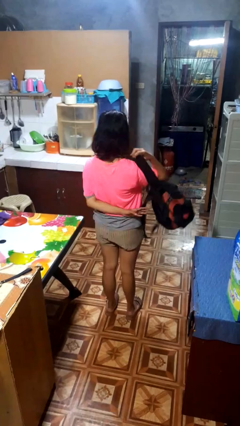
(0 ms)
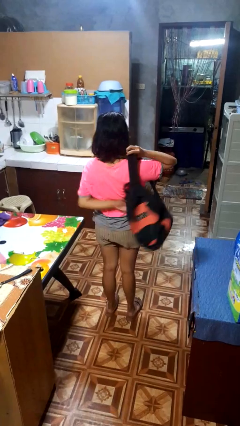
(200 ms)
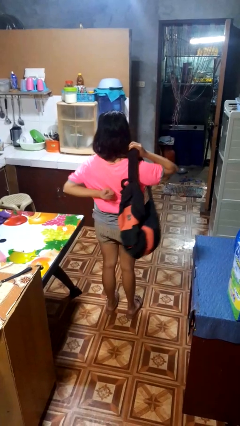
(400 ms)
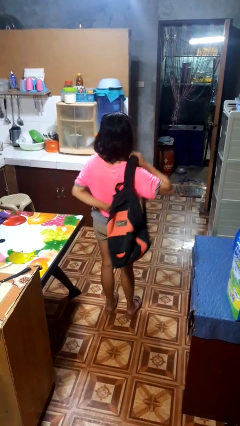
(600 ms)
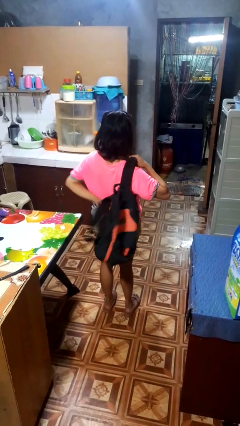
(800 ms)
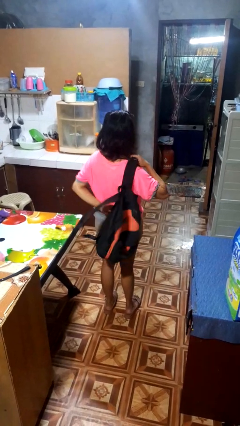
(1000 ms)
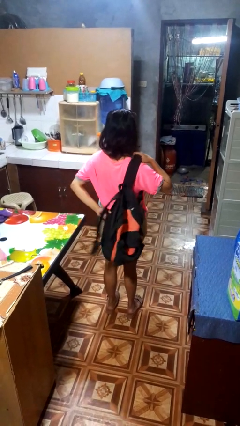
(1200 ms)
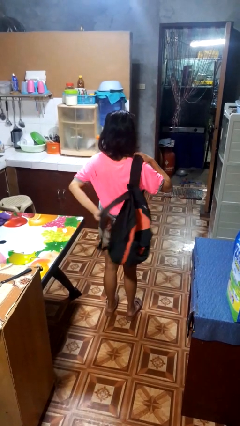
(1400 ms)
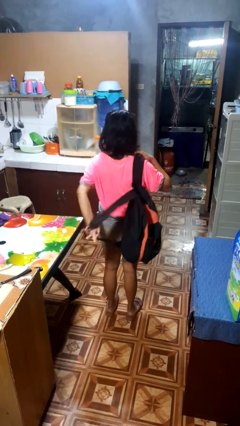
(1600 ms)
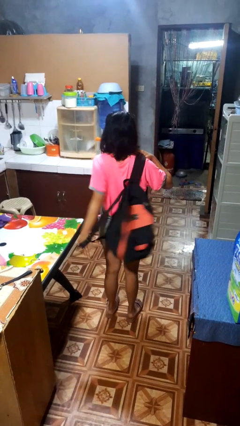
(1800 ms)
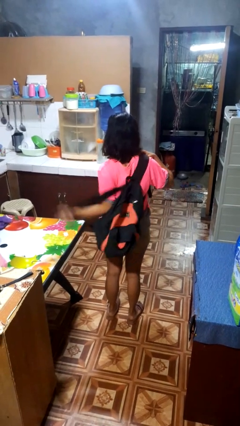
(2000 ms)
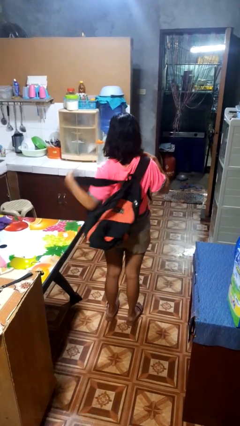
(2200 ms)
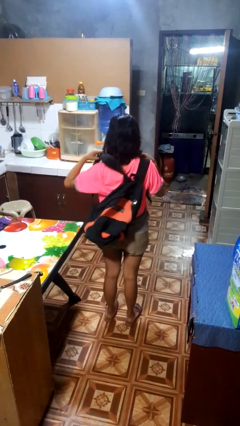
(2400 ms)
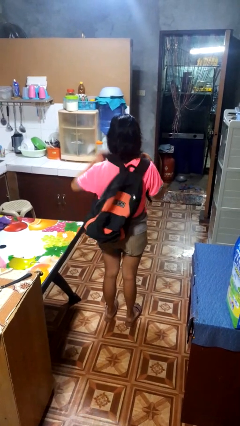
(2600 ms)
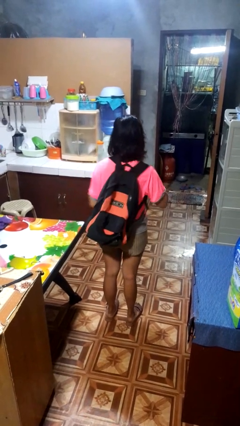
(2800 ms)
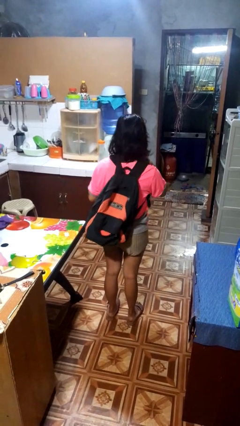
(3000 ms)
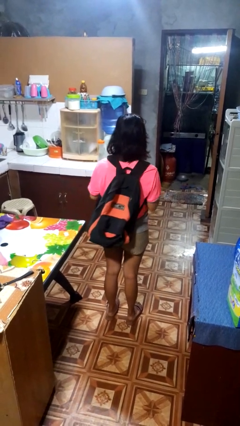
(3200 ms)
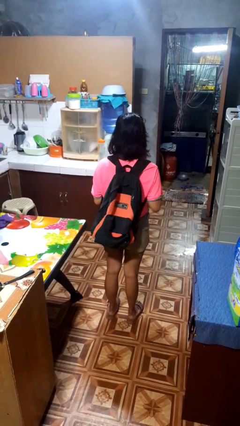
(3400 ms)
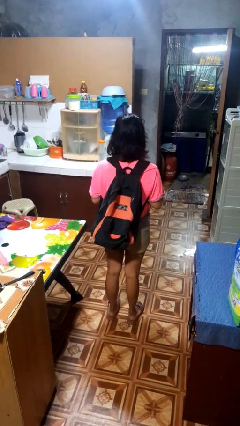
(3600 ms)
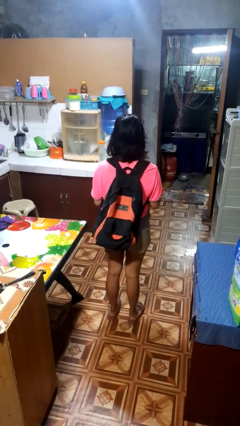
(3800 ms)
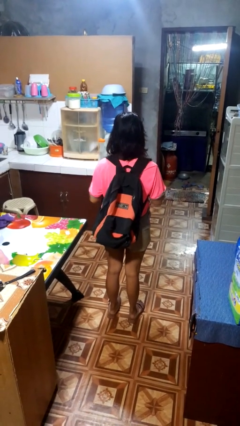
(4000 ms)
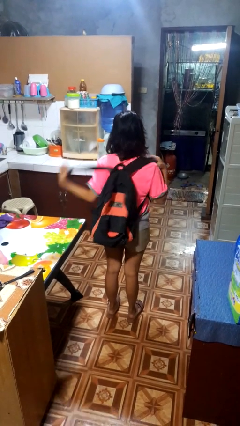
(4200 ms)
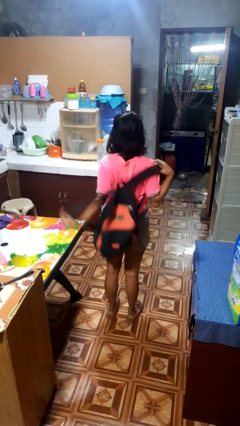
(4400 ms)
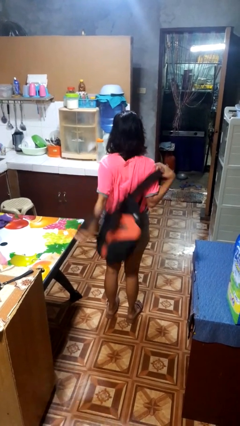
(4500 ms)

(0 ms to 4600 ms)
person puts on backpack

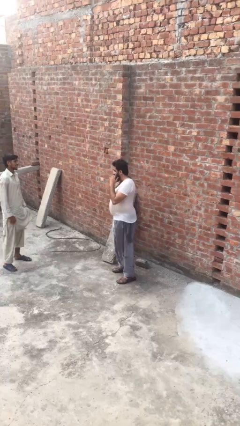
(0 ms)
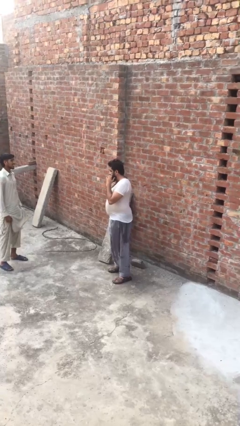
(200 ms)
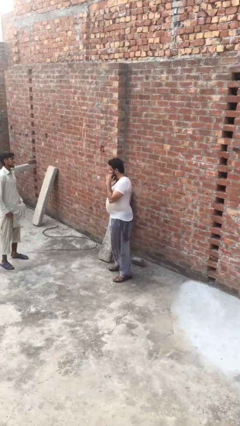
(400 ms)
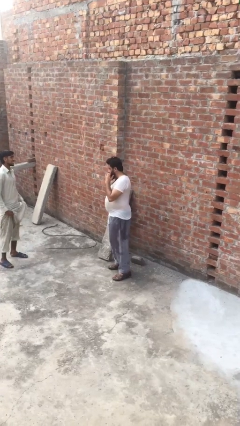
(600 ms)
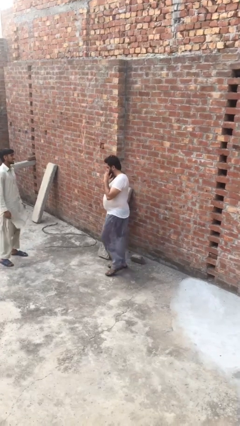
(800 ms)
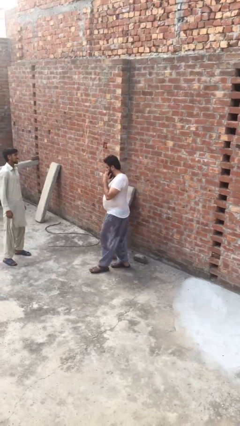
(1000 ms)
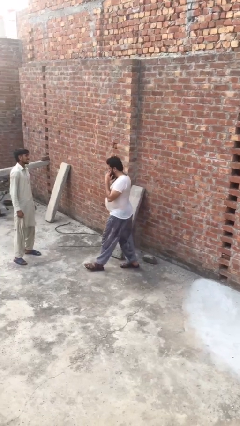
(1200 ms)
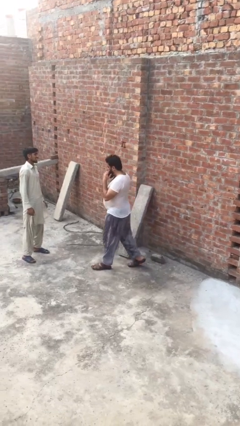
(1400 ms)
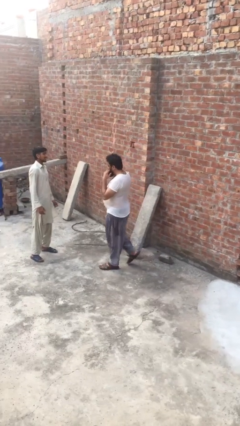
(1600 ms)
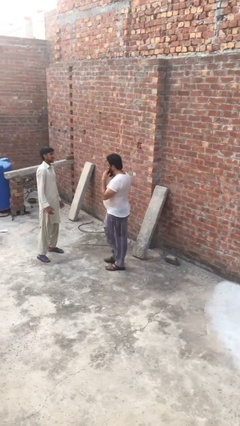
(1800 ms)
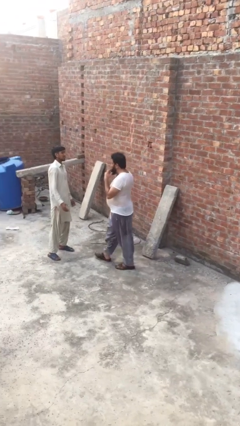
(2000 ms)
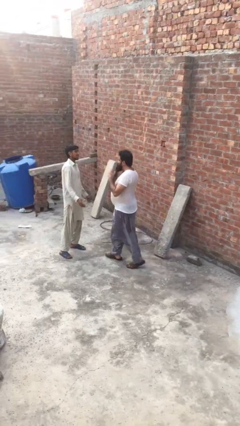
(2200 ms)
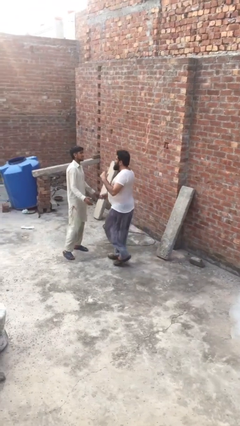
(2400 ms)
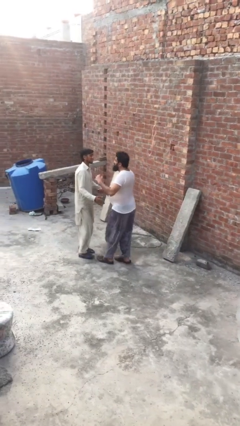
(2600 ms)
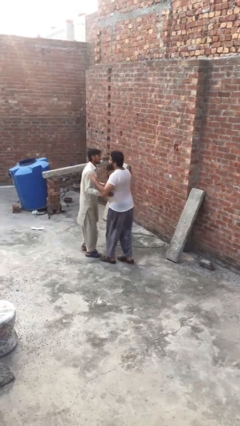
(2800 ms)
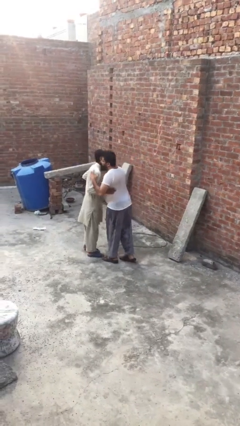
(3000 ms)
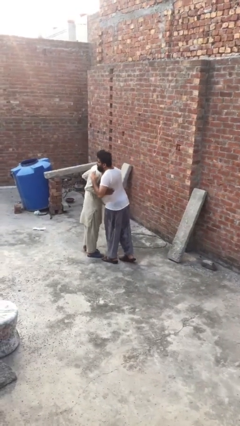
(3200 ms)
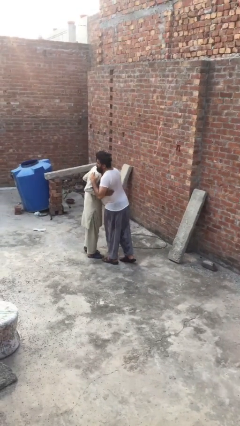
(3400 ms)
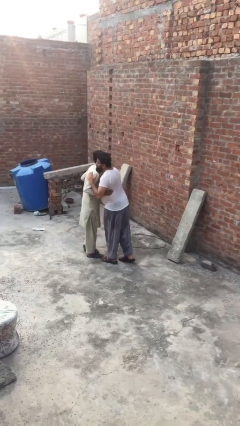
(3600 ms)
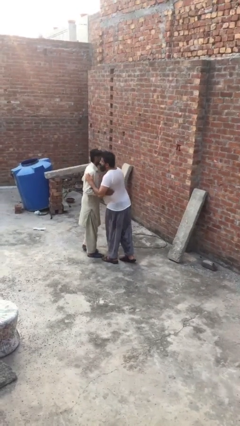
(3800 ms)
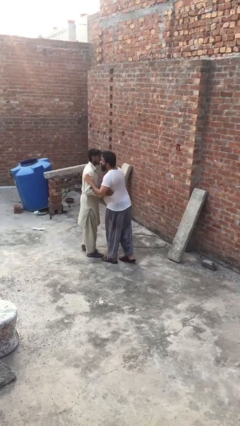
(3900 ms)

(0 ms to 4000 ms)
person embraces person

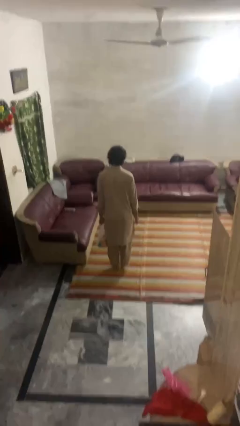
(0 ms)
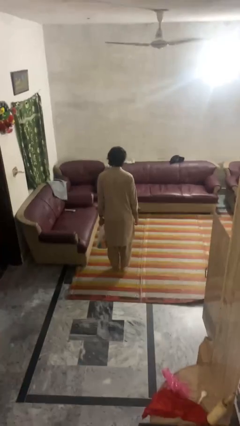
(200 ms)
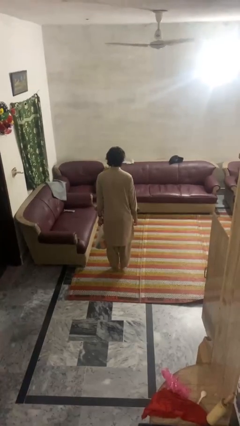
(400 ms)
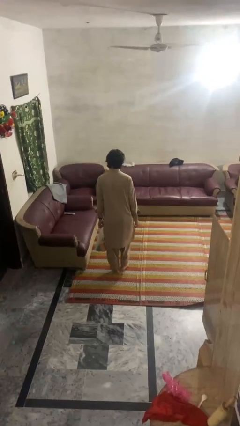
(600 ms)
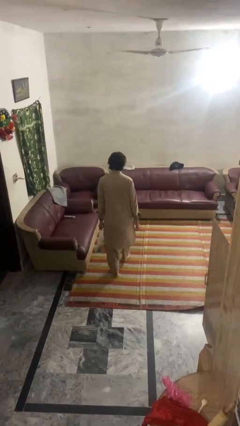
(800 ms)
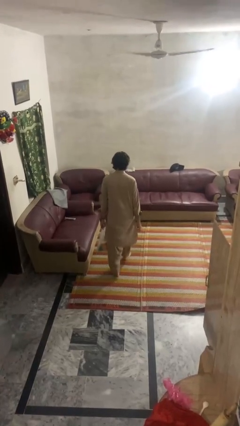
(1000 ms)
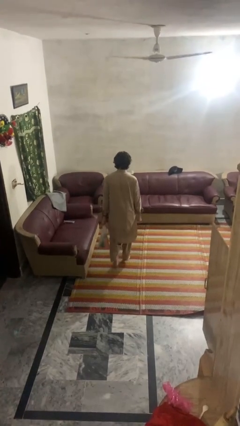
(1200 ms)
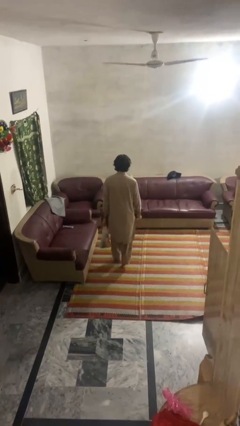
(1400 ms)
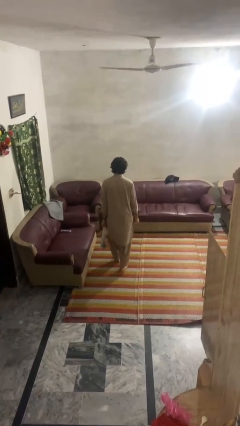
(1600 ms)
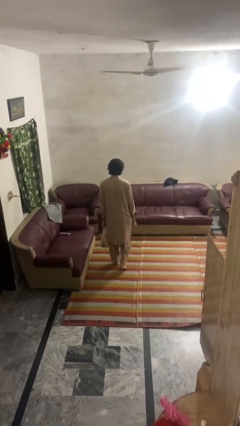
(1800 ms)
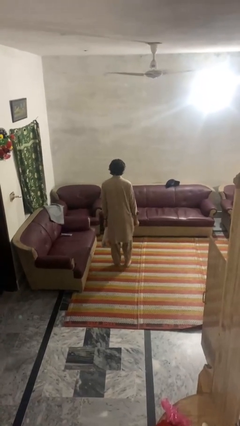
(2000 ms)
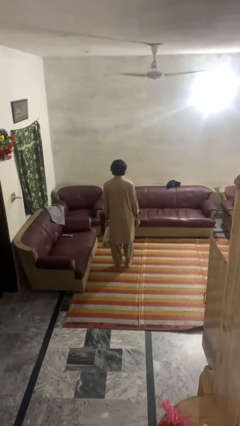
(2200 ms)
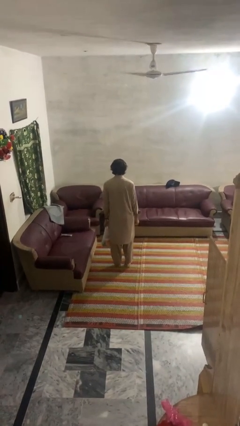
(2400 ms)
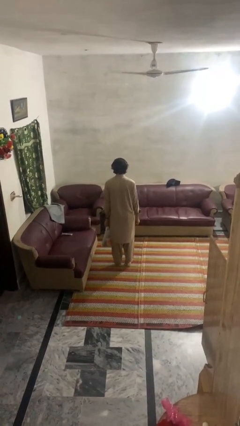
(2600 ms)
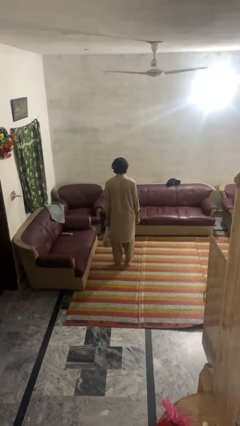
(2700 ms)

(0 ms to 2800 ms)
person carries groceries

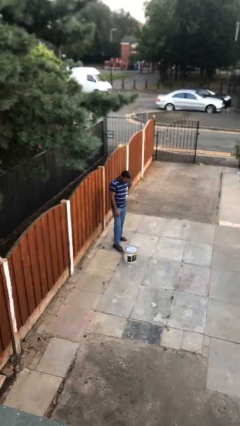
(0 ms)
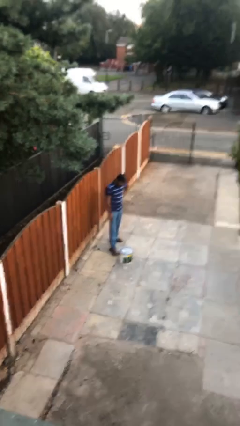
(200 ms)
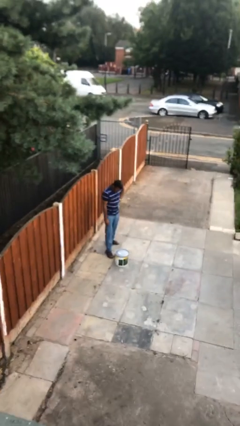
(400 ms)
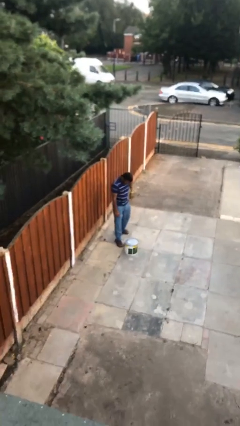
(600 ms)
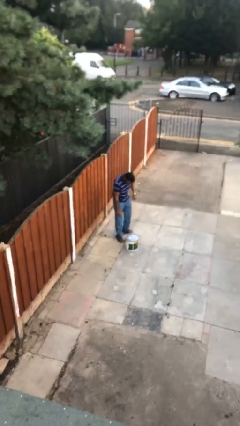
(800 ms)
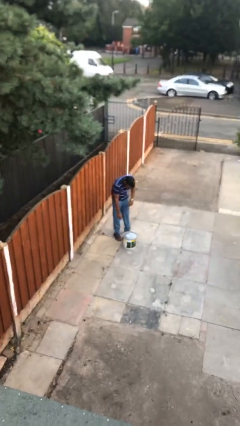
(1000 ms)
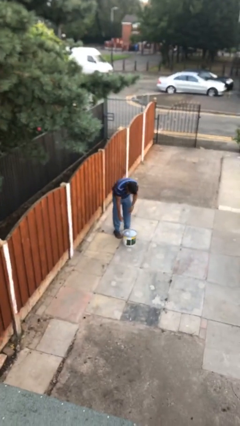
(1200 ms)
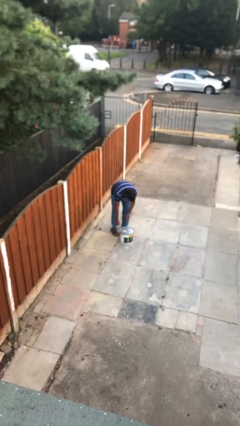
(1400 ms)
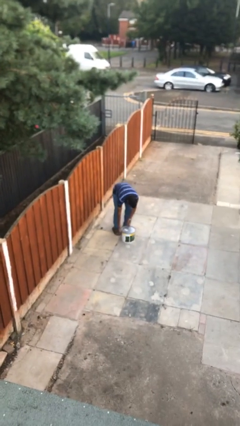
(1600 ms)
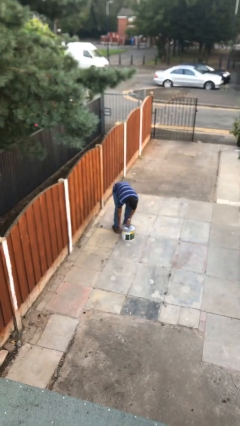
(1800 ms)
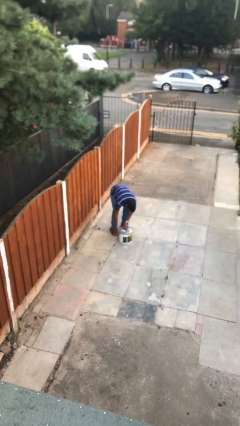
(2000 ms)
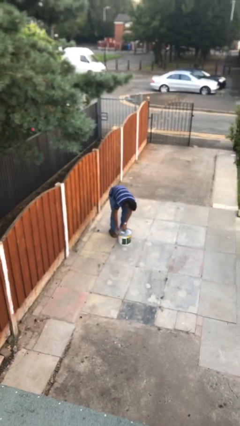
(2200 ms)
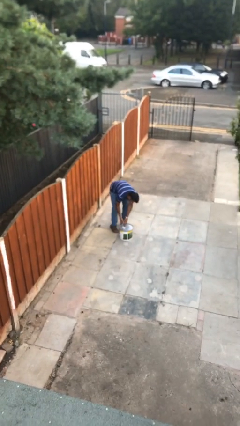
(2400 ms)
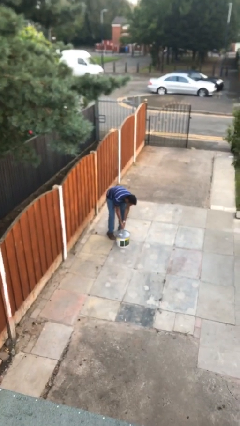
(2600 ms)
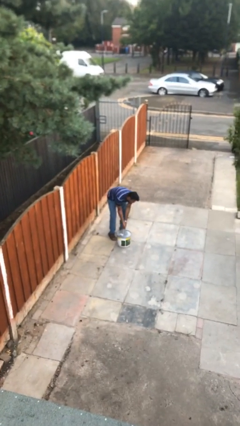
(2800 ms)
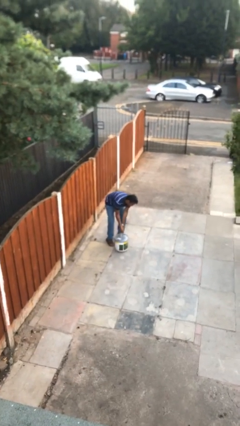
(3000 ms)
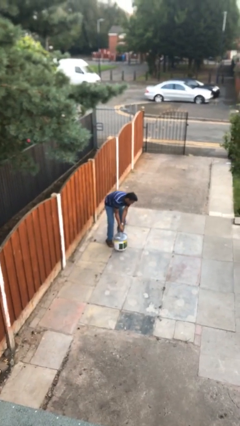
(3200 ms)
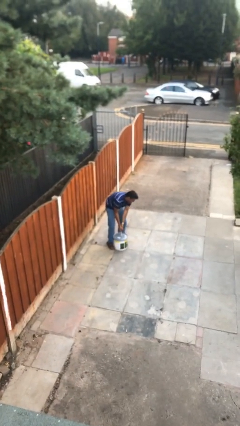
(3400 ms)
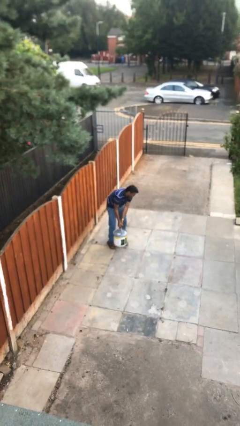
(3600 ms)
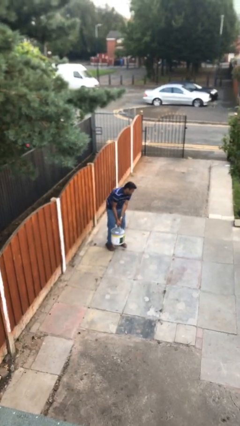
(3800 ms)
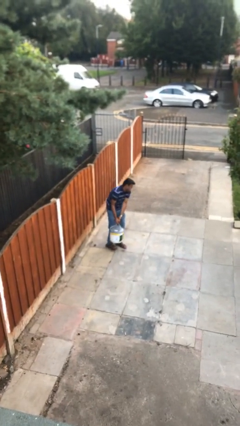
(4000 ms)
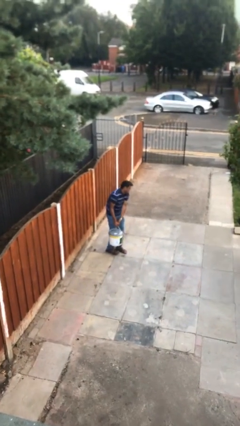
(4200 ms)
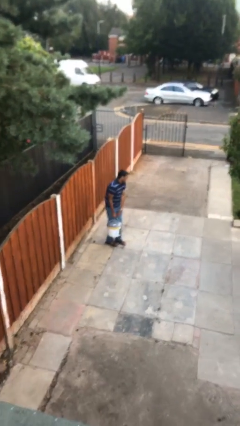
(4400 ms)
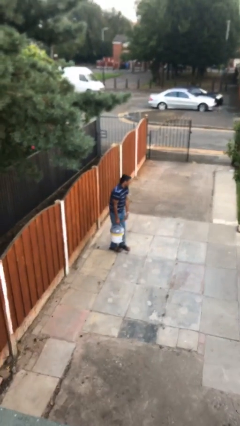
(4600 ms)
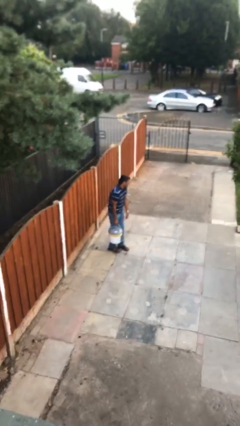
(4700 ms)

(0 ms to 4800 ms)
person picks up object from floor

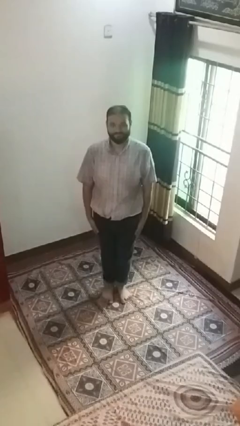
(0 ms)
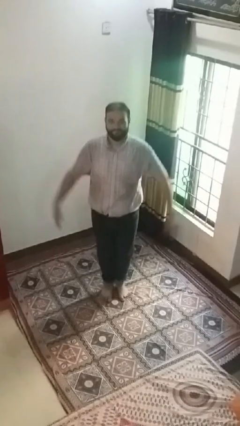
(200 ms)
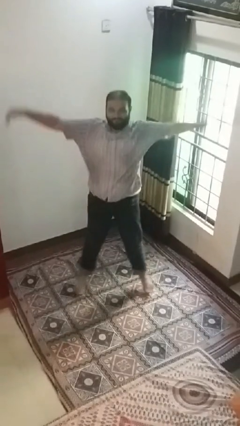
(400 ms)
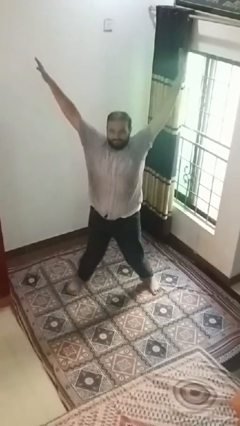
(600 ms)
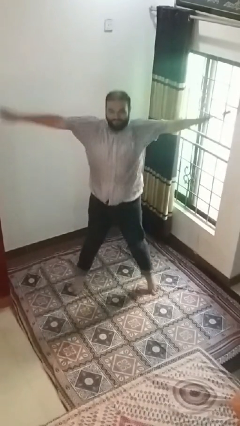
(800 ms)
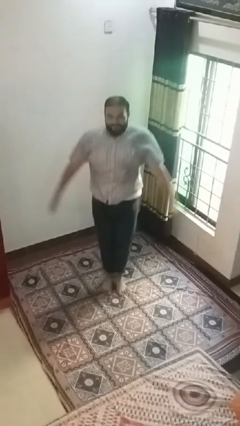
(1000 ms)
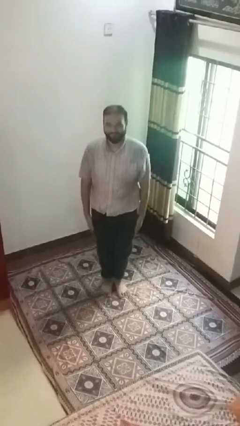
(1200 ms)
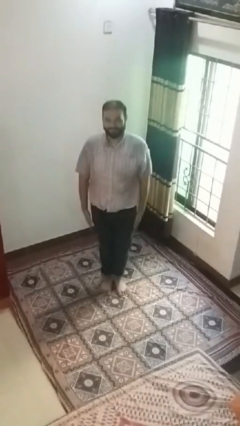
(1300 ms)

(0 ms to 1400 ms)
person exercises with jumping jacks
